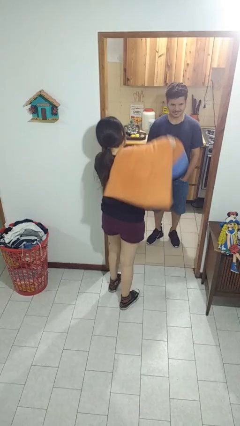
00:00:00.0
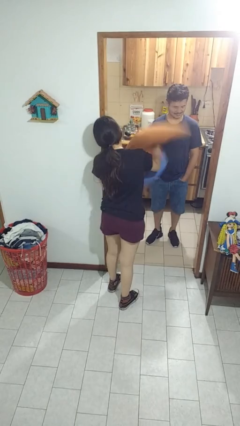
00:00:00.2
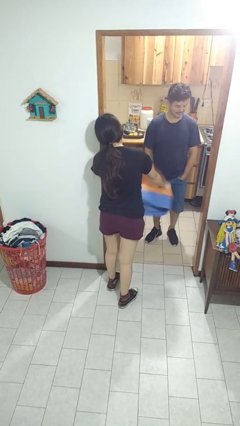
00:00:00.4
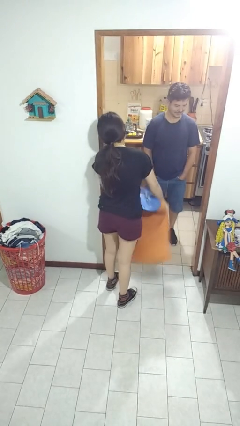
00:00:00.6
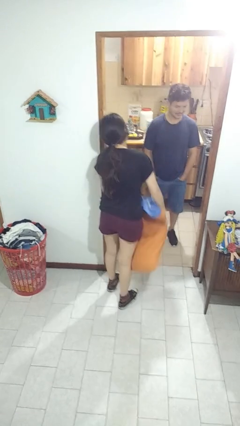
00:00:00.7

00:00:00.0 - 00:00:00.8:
person hits person with pillow

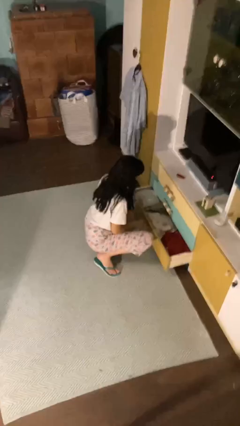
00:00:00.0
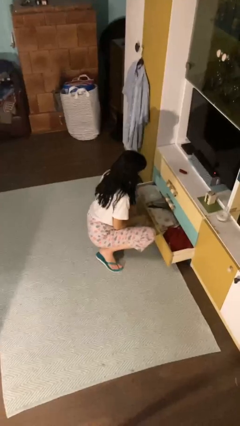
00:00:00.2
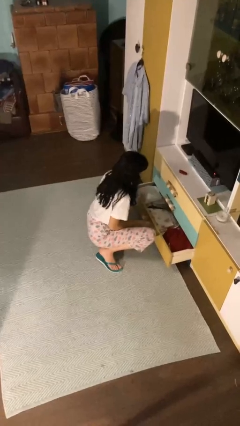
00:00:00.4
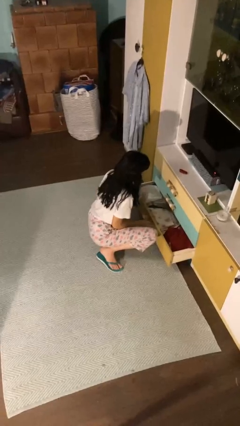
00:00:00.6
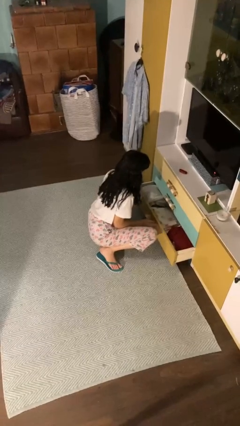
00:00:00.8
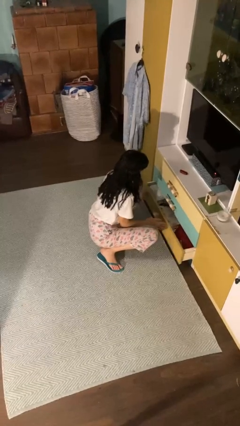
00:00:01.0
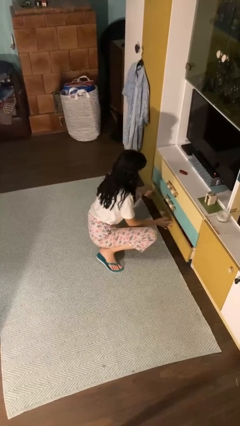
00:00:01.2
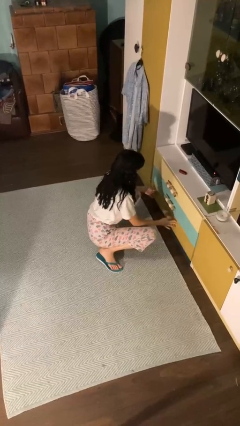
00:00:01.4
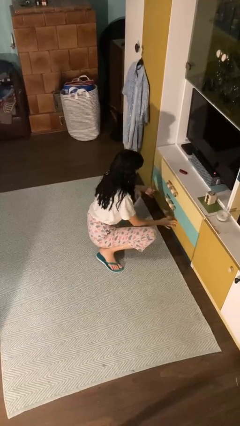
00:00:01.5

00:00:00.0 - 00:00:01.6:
person closes dresser drawer

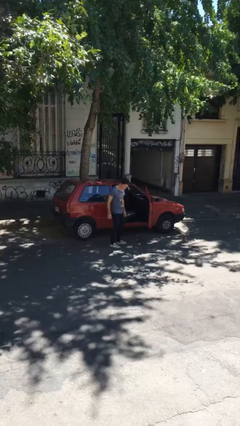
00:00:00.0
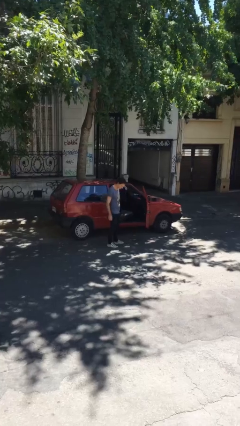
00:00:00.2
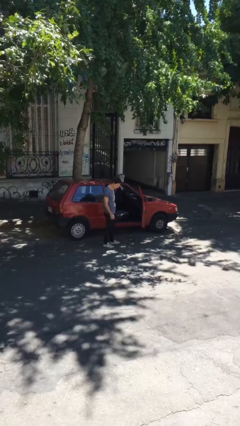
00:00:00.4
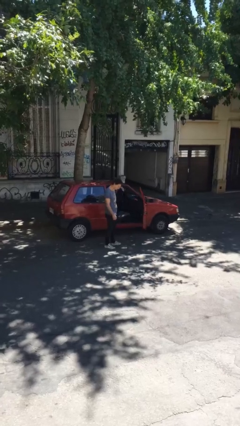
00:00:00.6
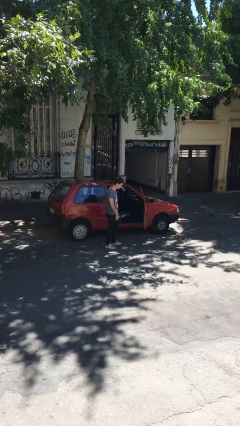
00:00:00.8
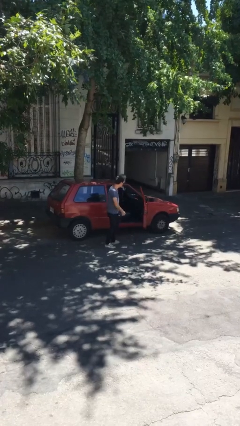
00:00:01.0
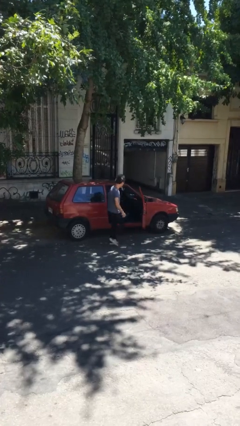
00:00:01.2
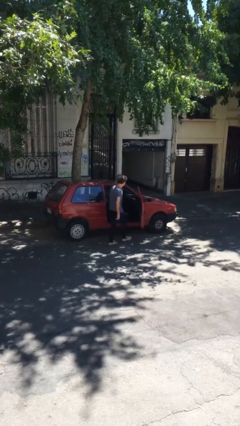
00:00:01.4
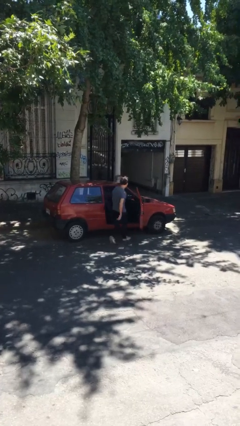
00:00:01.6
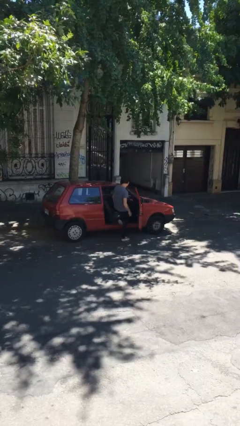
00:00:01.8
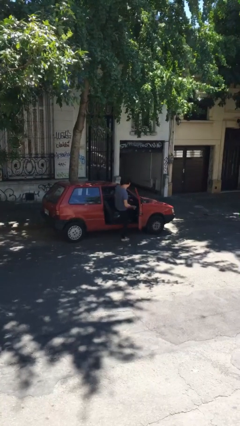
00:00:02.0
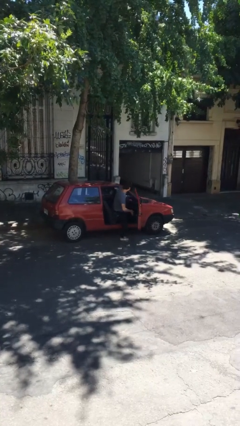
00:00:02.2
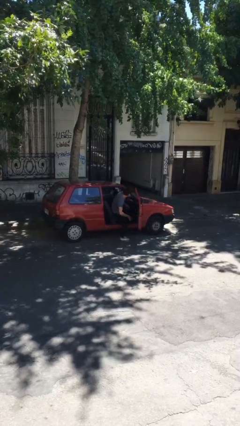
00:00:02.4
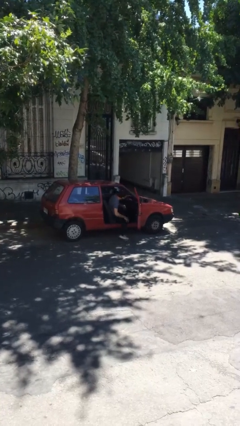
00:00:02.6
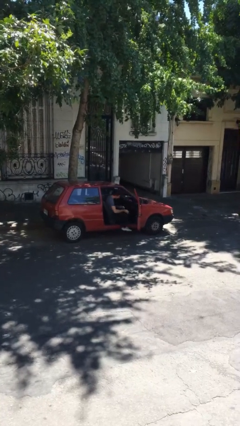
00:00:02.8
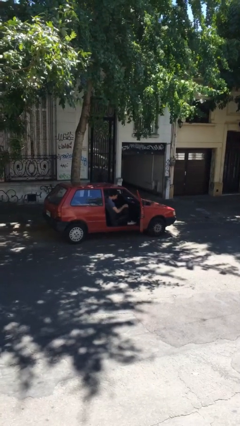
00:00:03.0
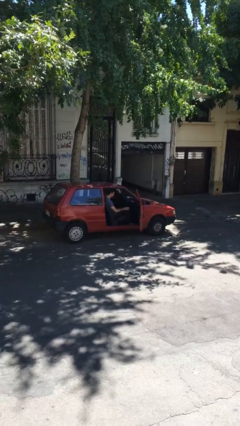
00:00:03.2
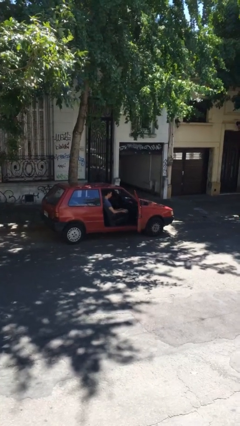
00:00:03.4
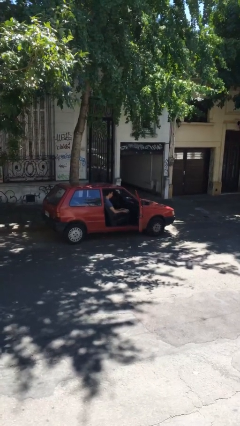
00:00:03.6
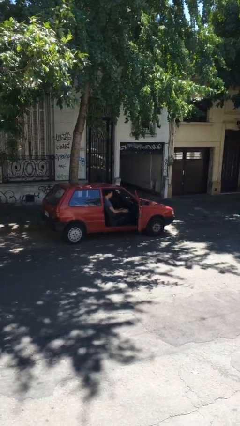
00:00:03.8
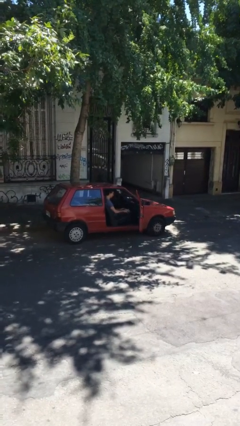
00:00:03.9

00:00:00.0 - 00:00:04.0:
person enters car

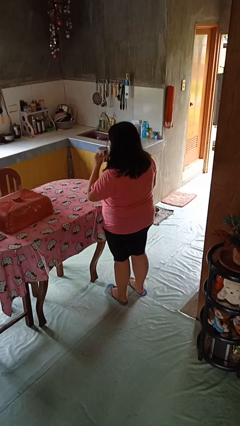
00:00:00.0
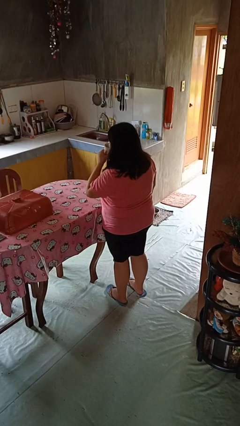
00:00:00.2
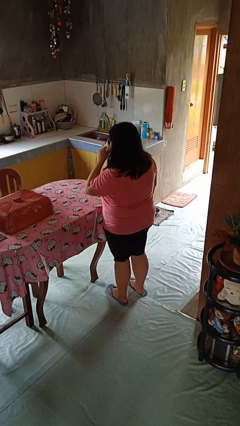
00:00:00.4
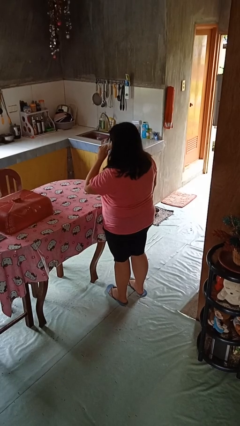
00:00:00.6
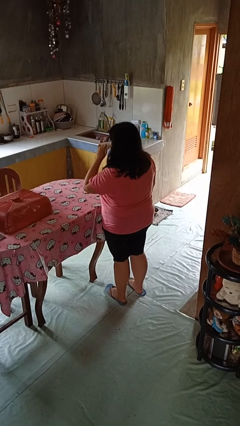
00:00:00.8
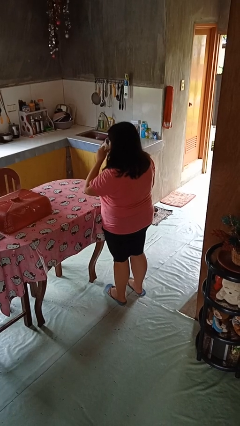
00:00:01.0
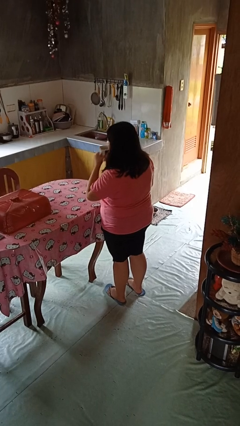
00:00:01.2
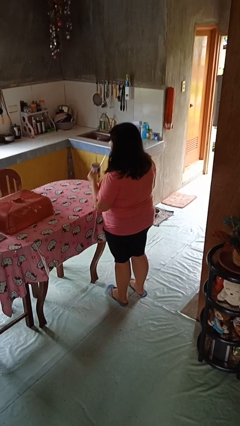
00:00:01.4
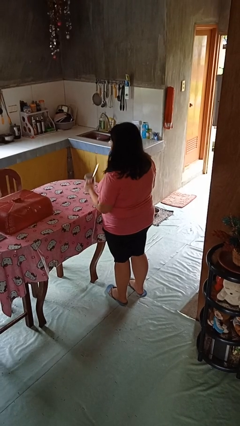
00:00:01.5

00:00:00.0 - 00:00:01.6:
person drinks from mug

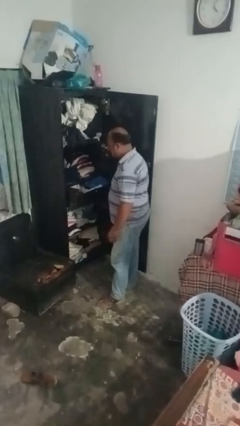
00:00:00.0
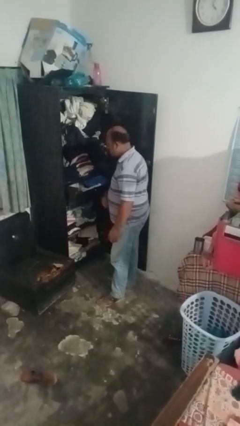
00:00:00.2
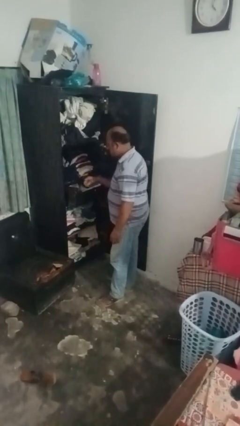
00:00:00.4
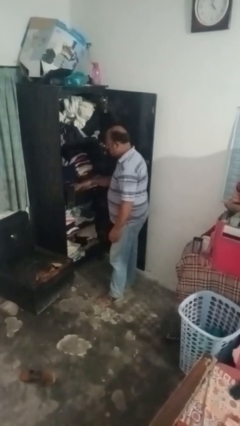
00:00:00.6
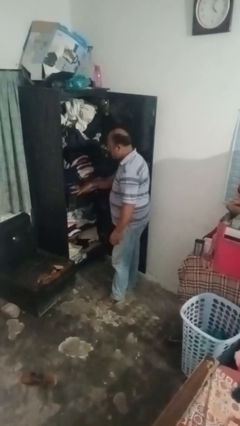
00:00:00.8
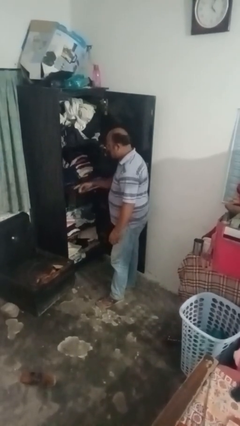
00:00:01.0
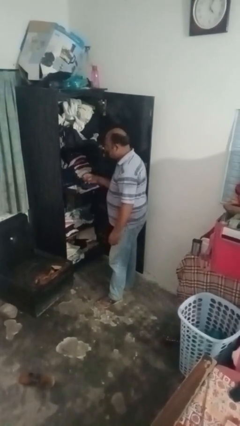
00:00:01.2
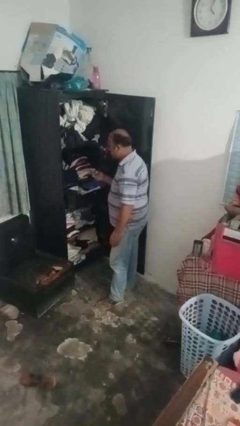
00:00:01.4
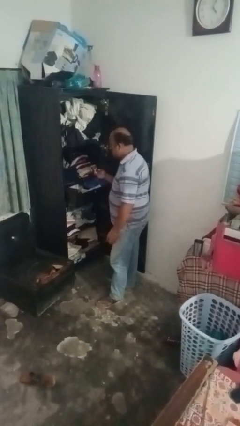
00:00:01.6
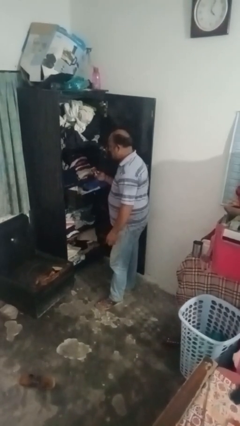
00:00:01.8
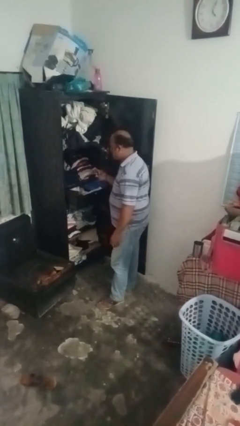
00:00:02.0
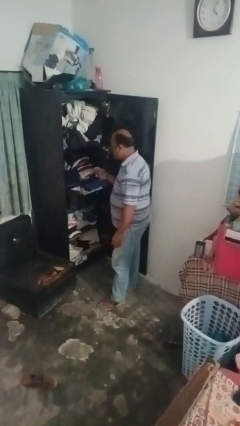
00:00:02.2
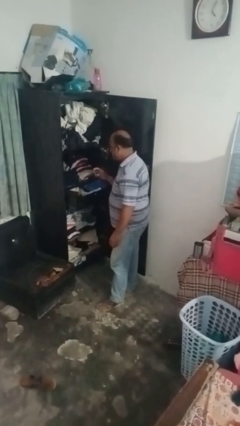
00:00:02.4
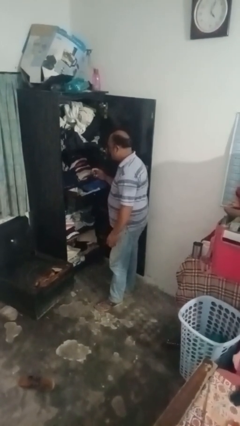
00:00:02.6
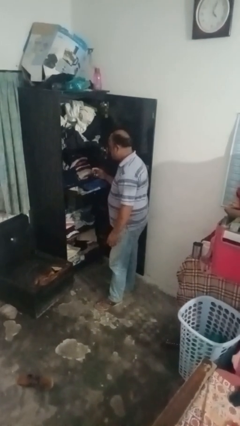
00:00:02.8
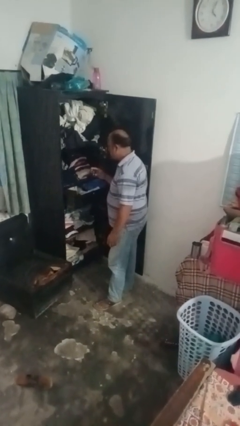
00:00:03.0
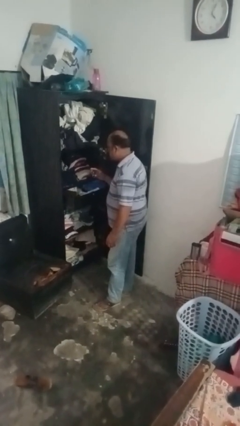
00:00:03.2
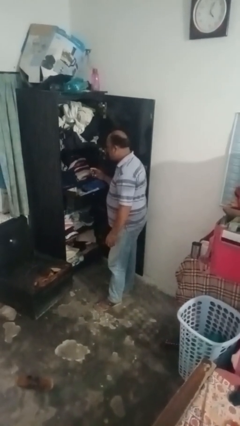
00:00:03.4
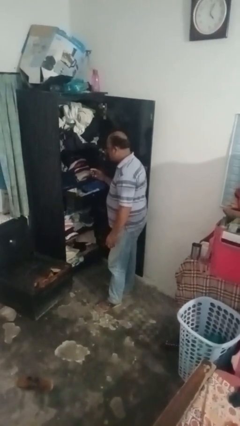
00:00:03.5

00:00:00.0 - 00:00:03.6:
person puts clothes into dresser

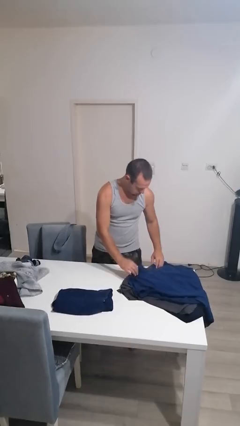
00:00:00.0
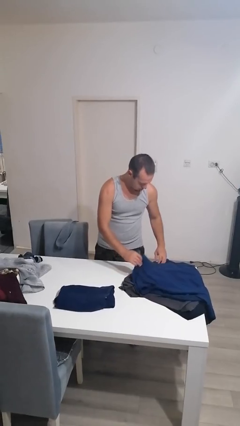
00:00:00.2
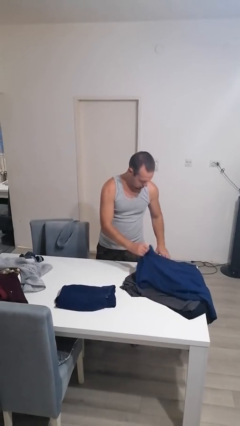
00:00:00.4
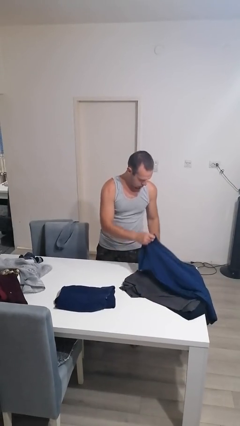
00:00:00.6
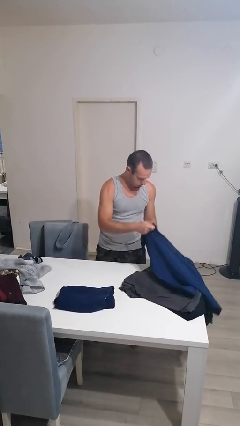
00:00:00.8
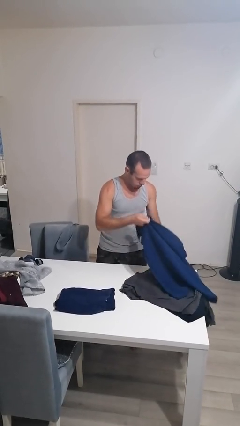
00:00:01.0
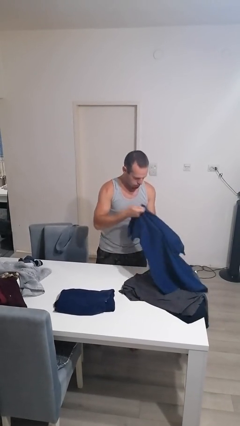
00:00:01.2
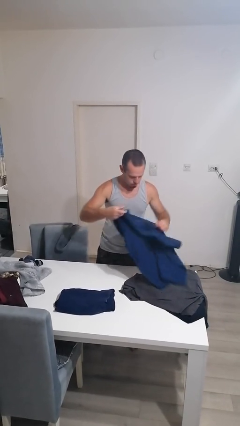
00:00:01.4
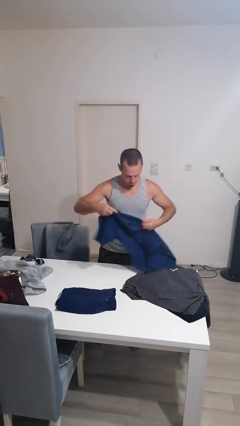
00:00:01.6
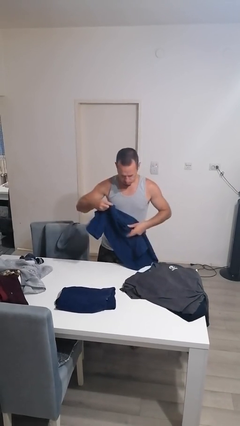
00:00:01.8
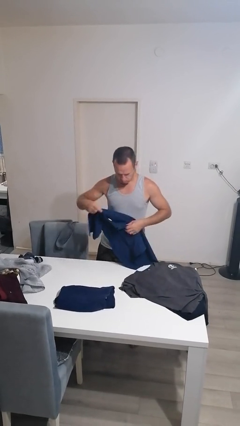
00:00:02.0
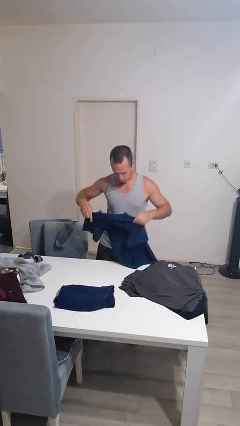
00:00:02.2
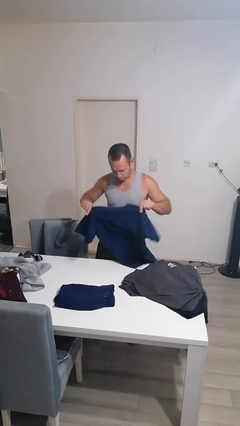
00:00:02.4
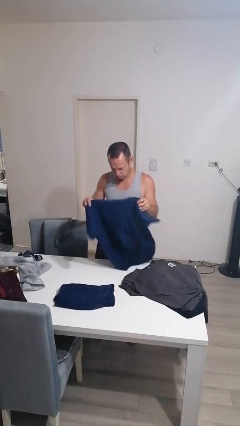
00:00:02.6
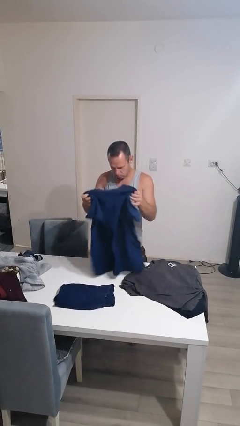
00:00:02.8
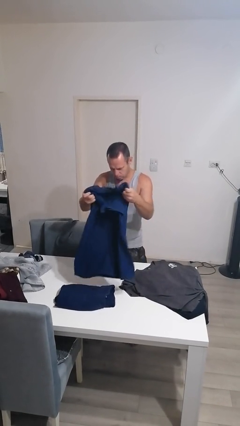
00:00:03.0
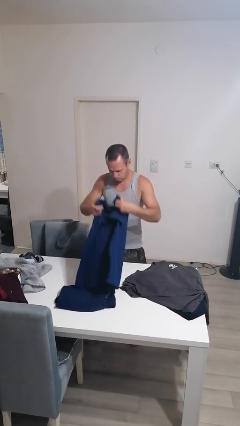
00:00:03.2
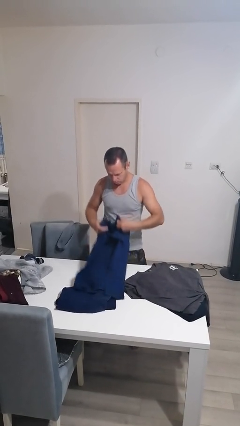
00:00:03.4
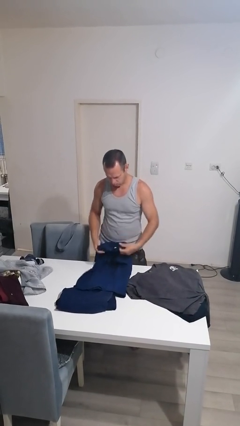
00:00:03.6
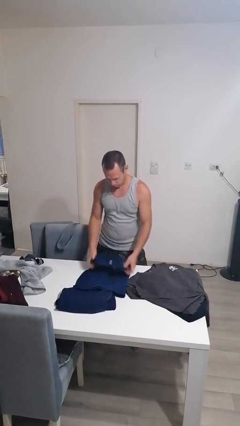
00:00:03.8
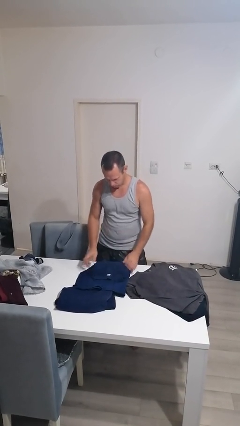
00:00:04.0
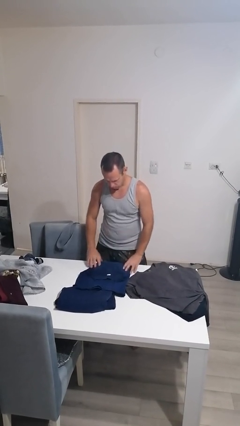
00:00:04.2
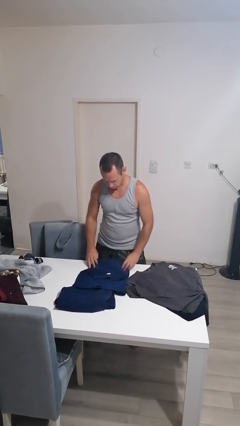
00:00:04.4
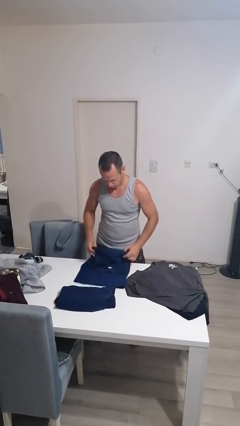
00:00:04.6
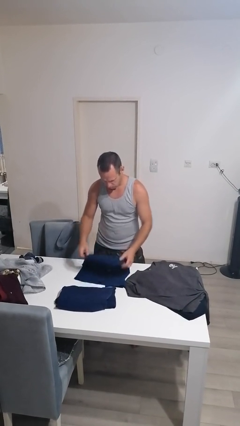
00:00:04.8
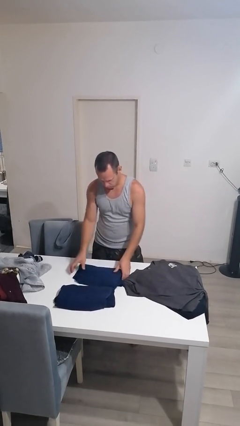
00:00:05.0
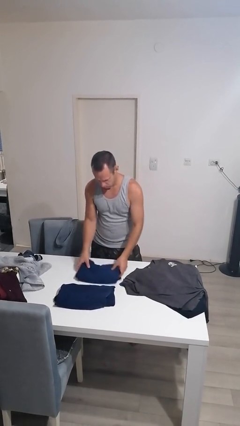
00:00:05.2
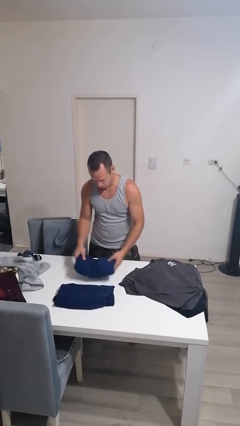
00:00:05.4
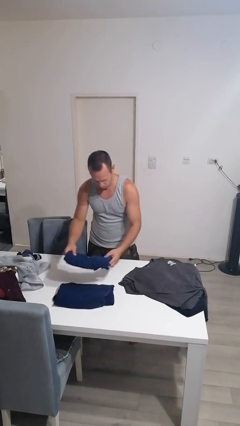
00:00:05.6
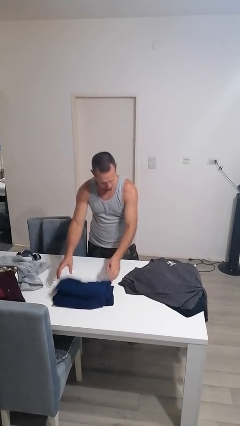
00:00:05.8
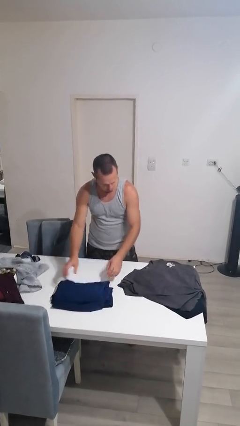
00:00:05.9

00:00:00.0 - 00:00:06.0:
person folds shirt
